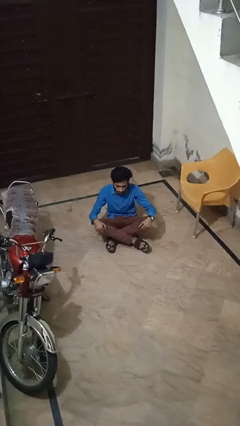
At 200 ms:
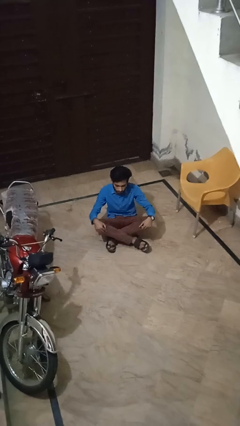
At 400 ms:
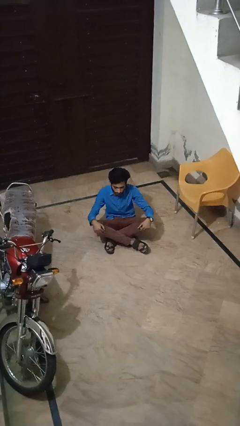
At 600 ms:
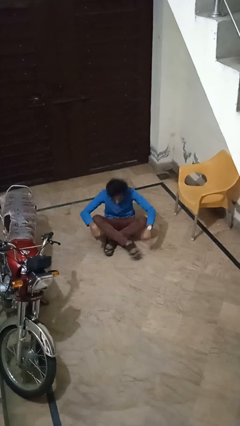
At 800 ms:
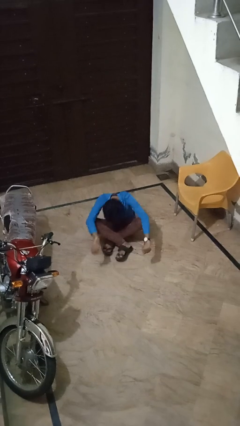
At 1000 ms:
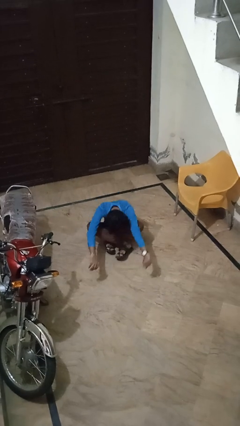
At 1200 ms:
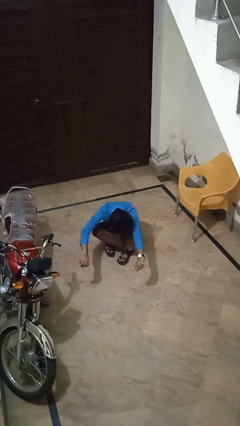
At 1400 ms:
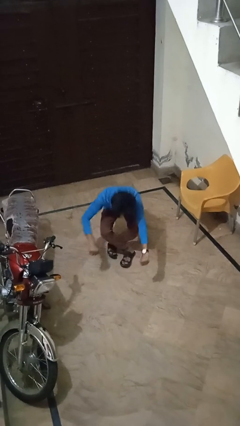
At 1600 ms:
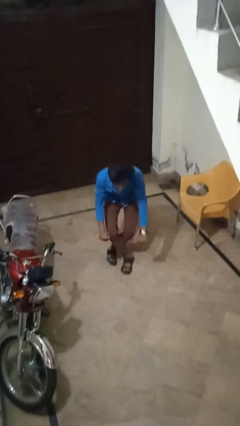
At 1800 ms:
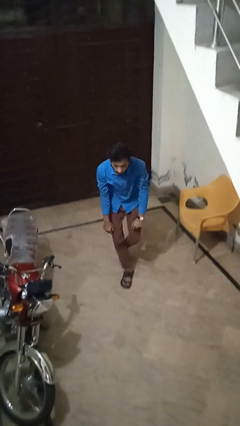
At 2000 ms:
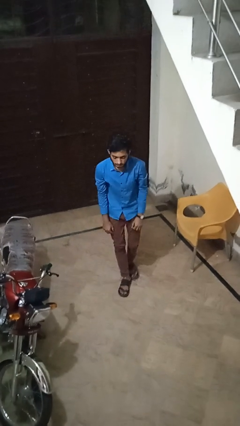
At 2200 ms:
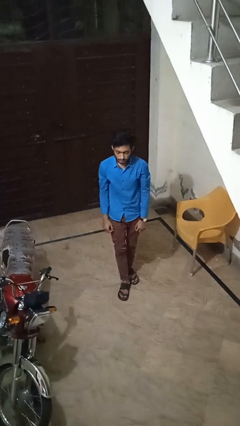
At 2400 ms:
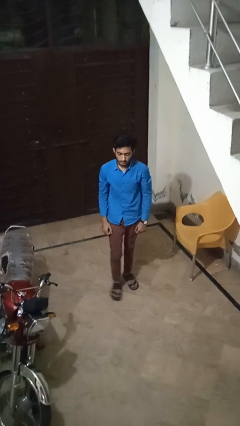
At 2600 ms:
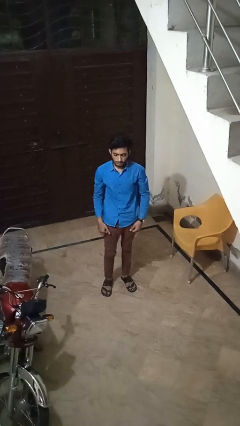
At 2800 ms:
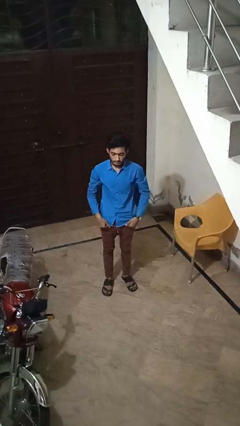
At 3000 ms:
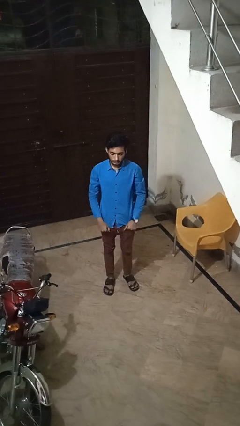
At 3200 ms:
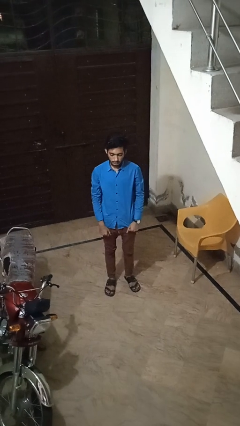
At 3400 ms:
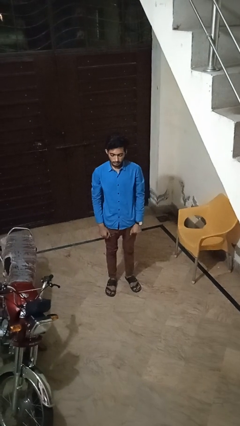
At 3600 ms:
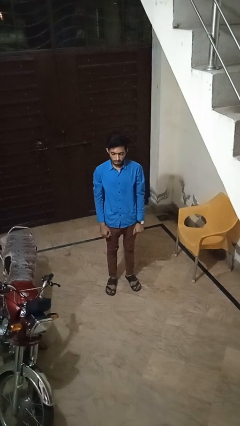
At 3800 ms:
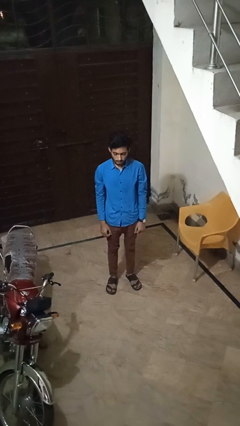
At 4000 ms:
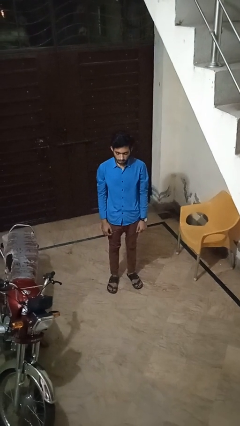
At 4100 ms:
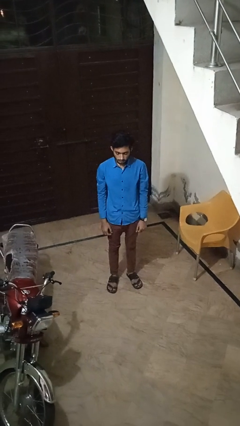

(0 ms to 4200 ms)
person stands up from floor

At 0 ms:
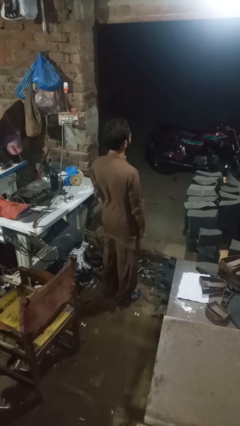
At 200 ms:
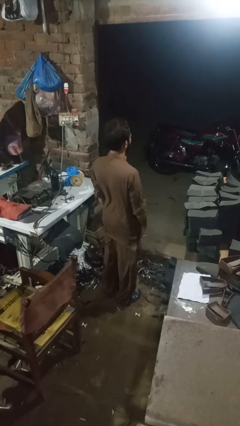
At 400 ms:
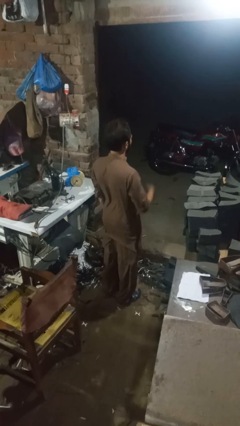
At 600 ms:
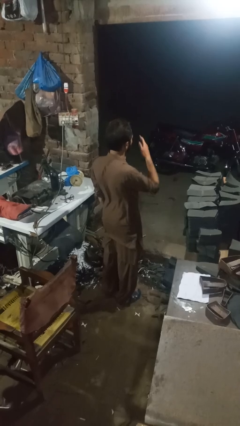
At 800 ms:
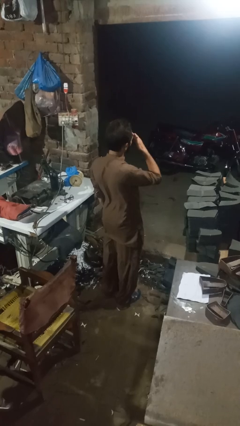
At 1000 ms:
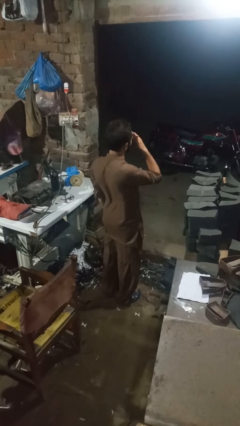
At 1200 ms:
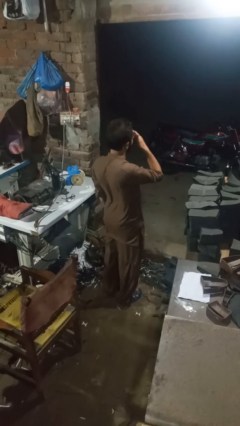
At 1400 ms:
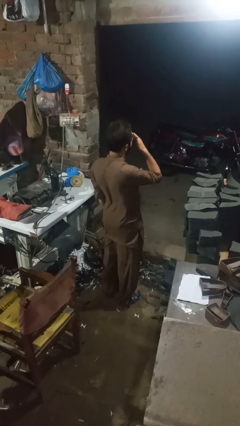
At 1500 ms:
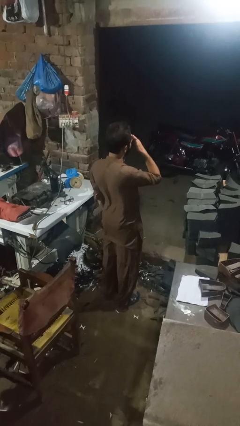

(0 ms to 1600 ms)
person rubs eyes

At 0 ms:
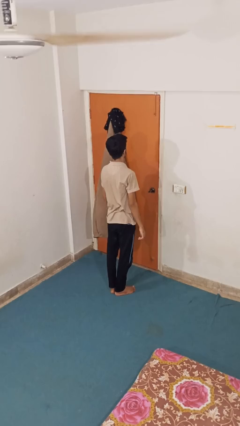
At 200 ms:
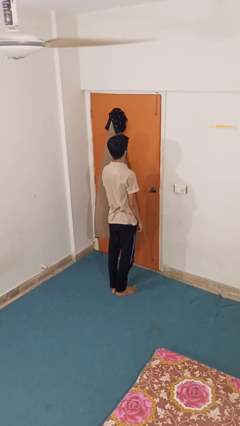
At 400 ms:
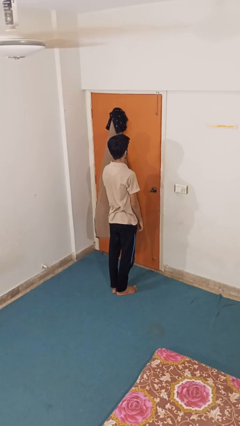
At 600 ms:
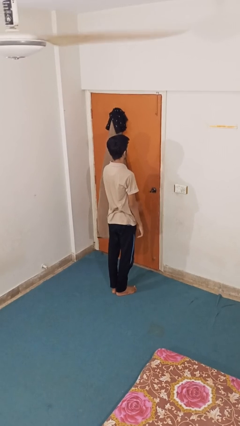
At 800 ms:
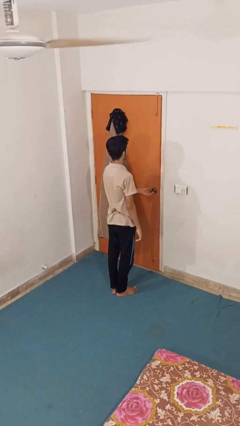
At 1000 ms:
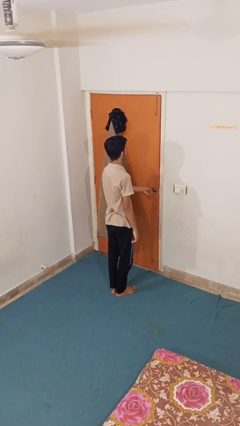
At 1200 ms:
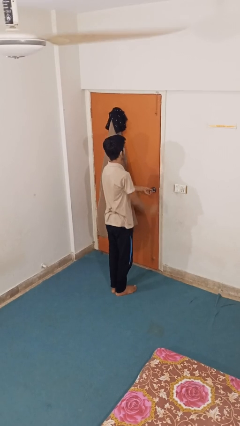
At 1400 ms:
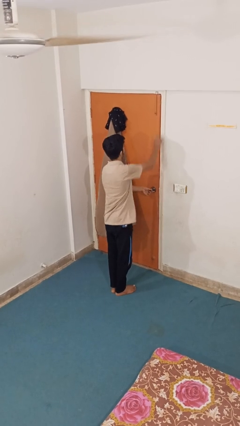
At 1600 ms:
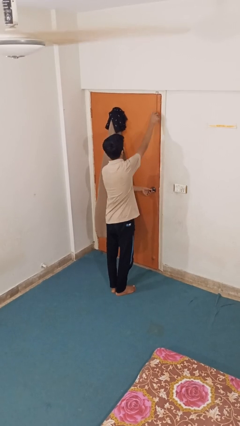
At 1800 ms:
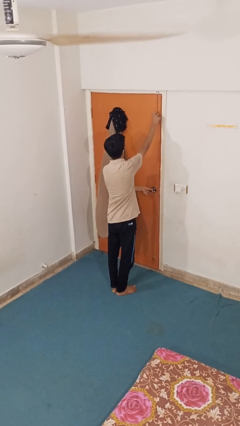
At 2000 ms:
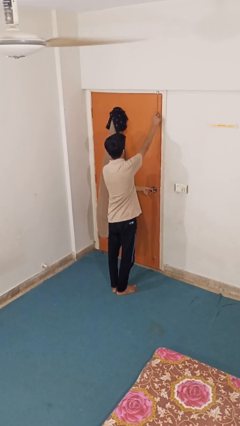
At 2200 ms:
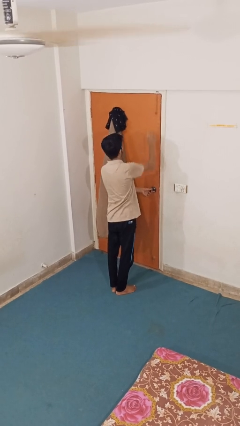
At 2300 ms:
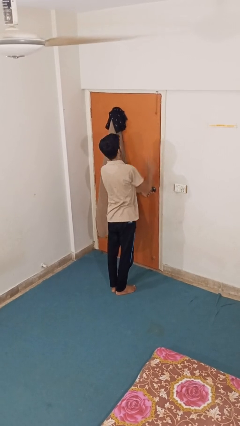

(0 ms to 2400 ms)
person unlocks door with keys

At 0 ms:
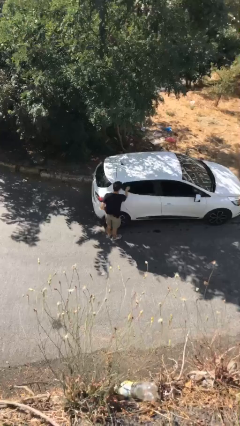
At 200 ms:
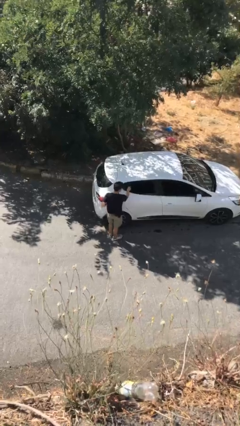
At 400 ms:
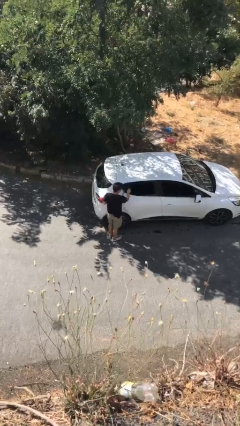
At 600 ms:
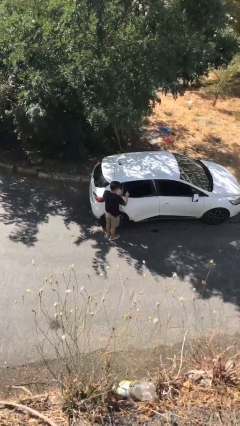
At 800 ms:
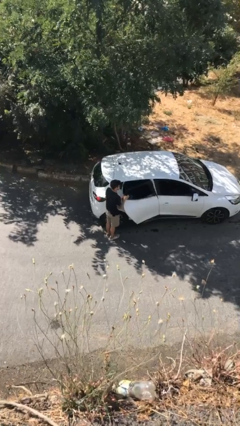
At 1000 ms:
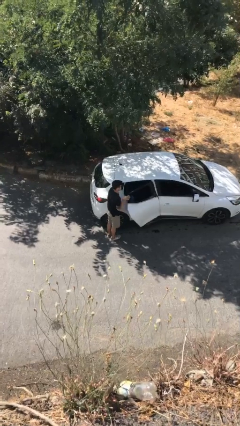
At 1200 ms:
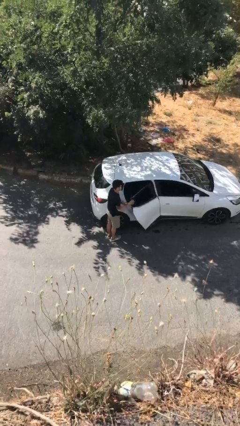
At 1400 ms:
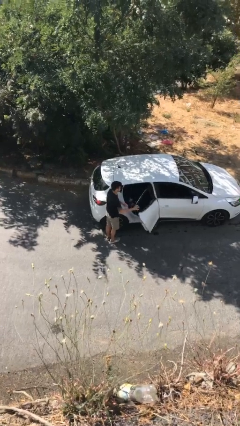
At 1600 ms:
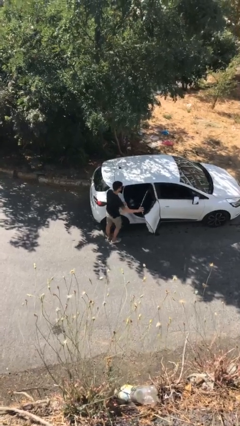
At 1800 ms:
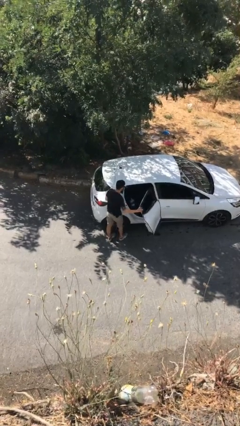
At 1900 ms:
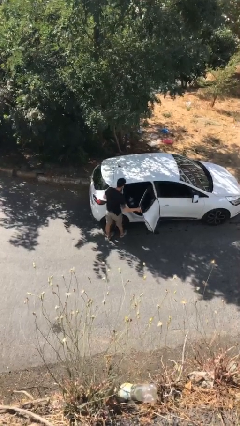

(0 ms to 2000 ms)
person opens car door

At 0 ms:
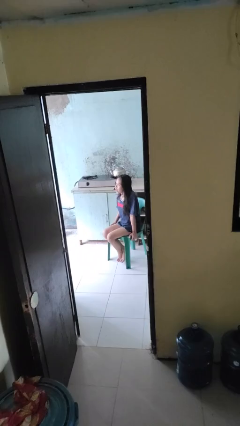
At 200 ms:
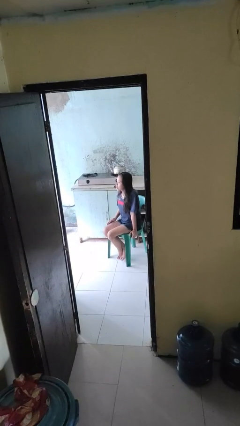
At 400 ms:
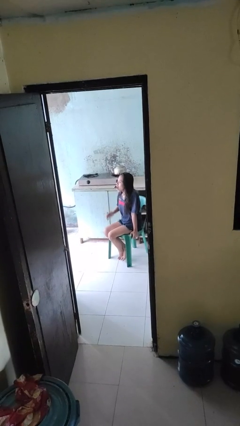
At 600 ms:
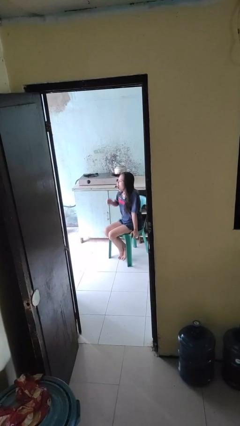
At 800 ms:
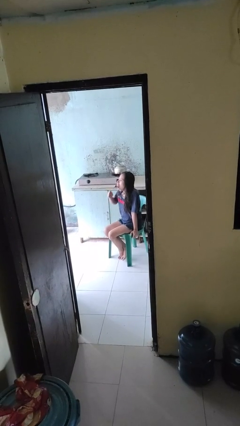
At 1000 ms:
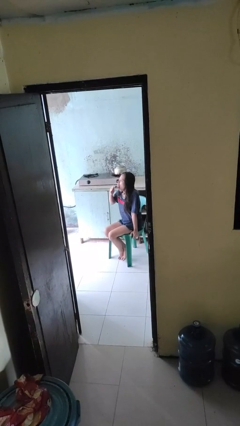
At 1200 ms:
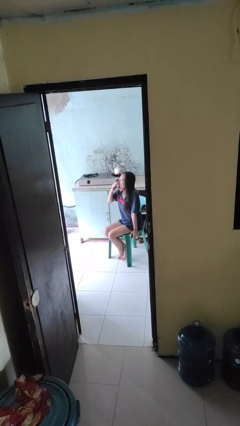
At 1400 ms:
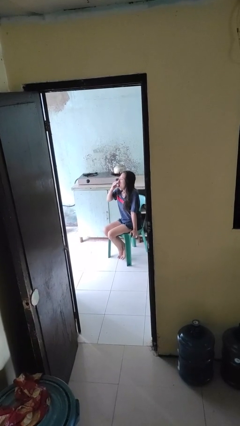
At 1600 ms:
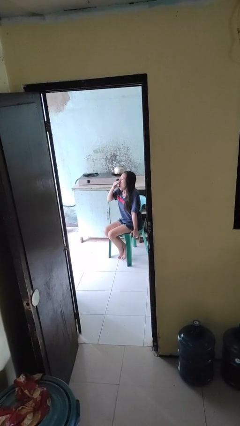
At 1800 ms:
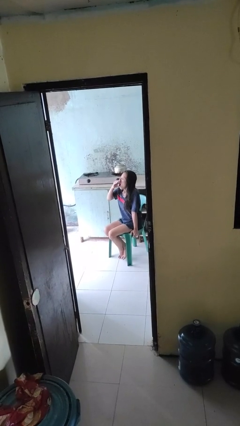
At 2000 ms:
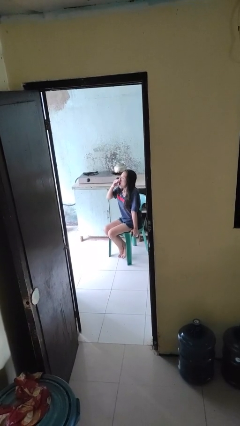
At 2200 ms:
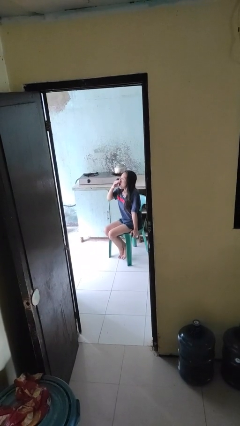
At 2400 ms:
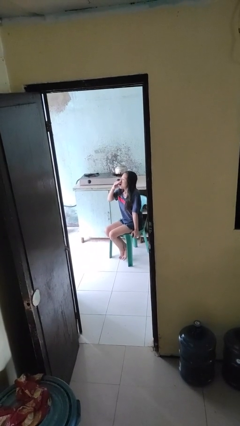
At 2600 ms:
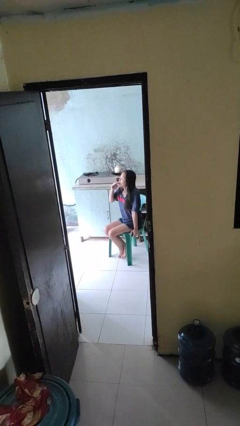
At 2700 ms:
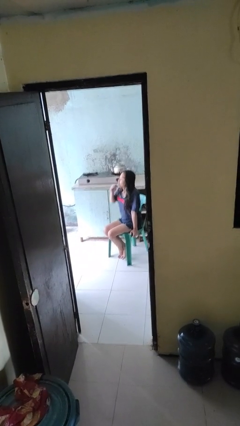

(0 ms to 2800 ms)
person yawns

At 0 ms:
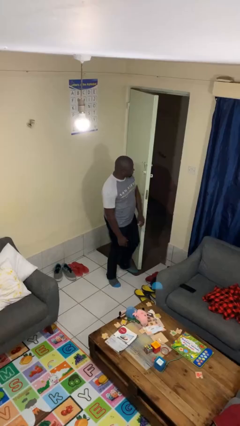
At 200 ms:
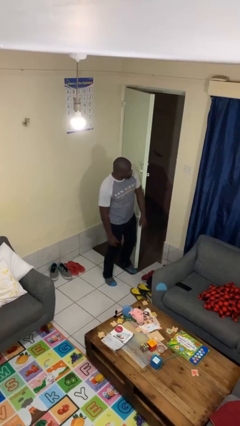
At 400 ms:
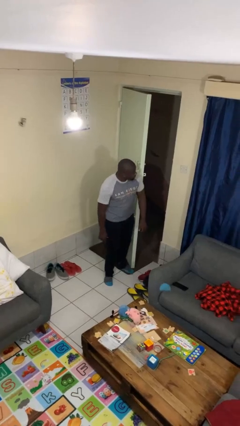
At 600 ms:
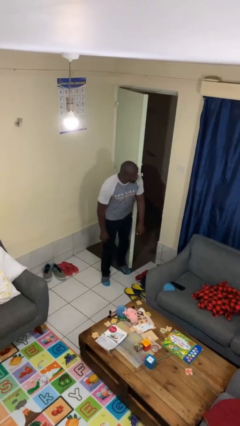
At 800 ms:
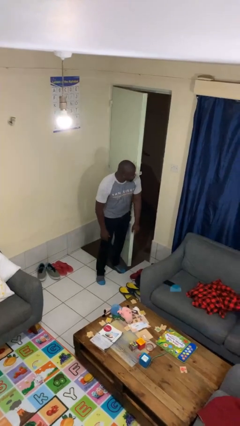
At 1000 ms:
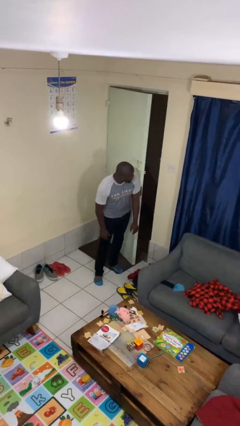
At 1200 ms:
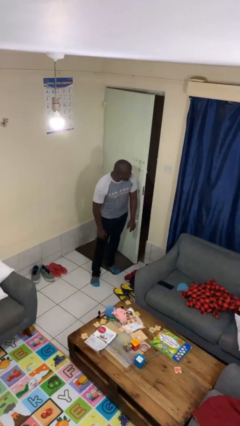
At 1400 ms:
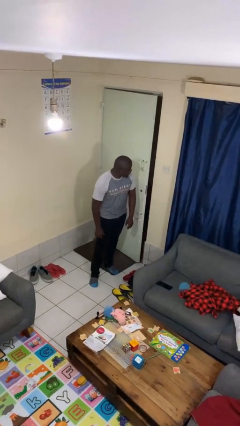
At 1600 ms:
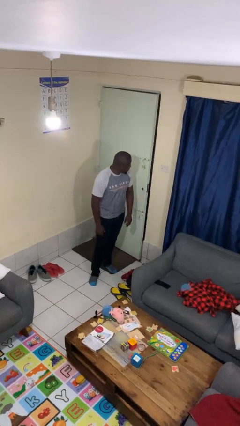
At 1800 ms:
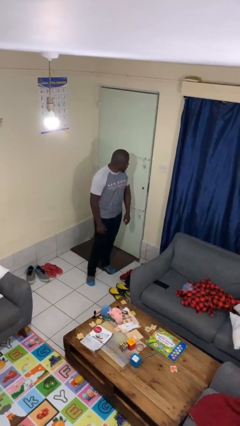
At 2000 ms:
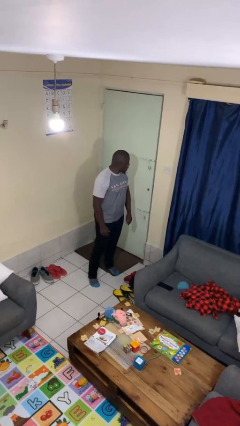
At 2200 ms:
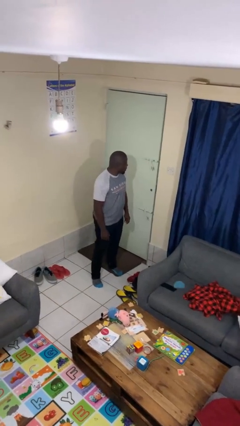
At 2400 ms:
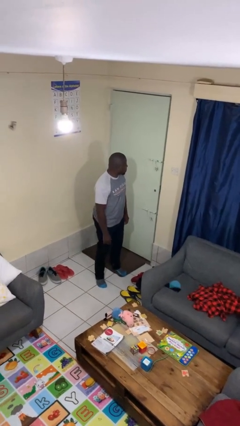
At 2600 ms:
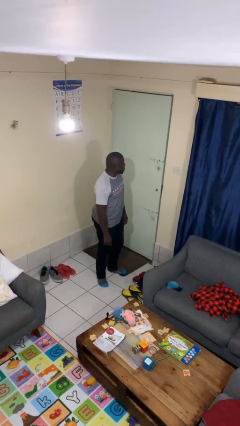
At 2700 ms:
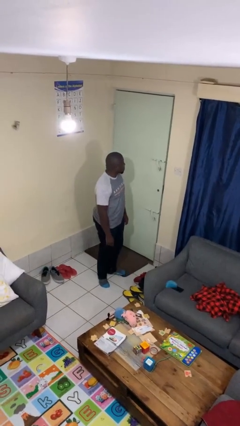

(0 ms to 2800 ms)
person closes door with hip

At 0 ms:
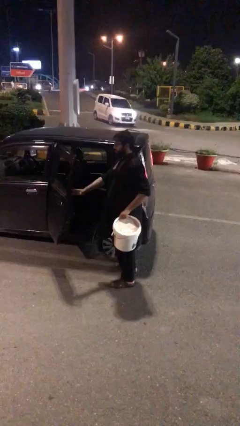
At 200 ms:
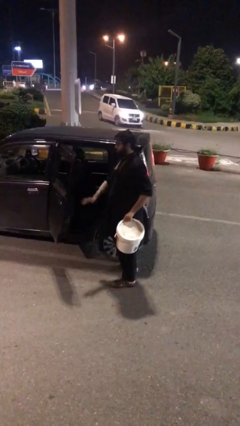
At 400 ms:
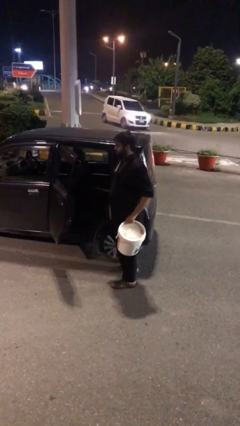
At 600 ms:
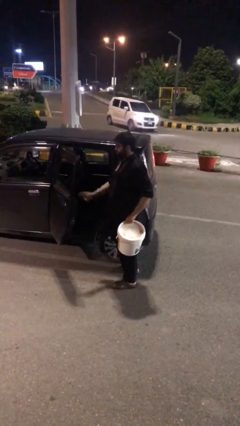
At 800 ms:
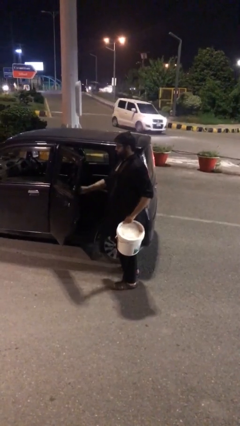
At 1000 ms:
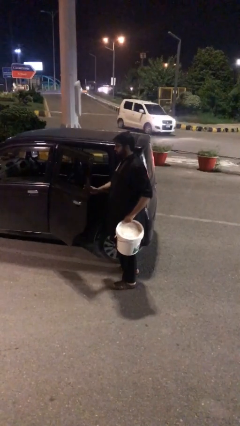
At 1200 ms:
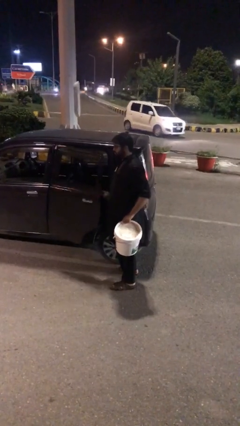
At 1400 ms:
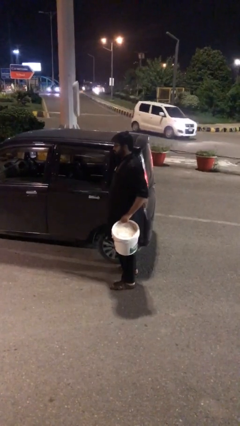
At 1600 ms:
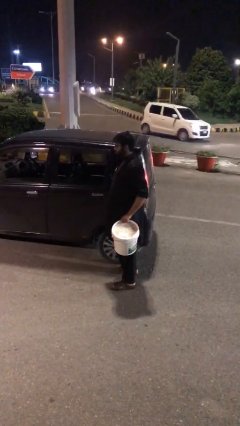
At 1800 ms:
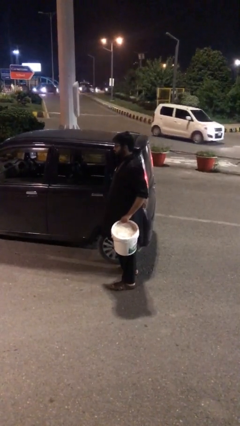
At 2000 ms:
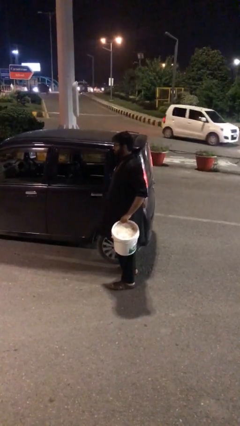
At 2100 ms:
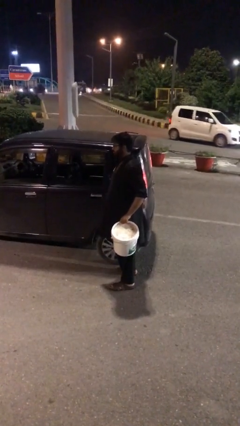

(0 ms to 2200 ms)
person closes car door
